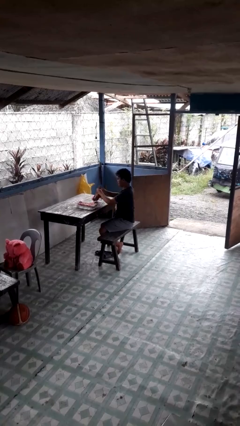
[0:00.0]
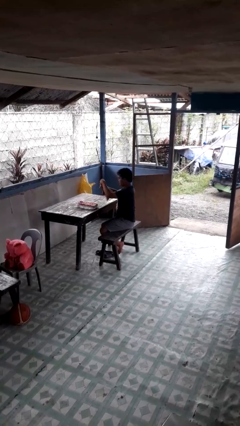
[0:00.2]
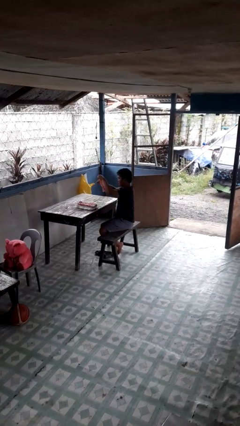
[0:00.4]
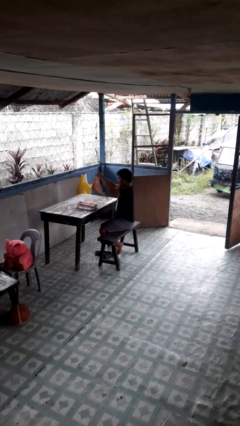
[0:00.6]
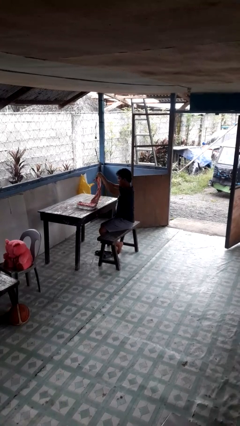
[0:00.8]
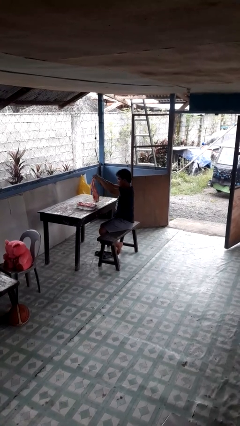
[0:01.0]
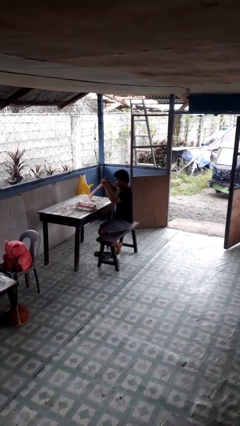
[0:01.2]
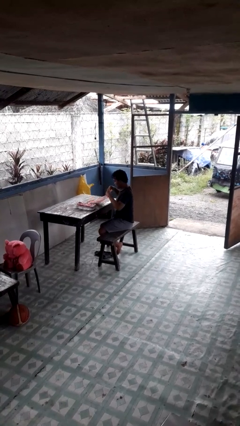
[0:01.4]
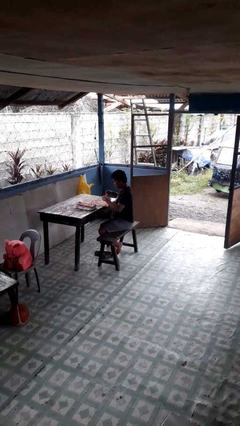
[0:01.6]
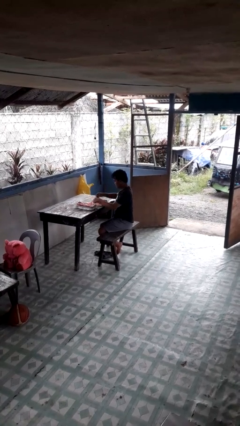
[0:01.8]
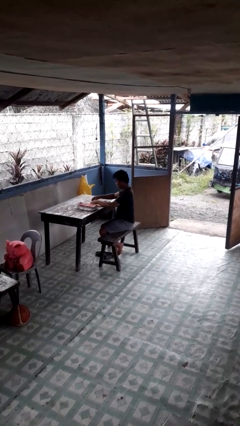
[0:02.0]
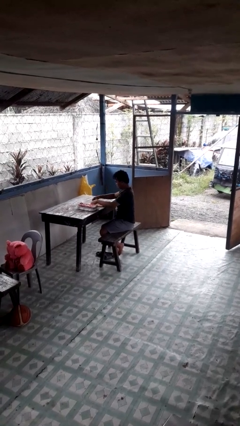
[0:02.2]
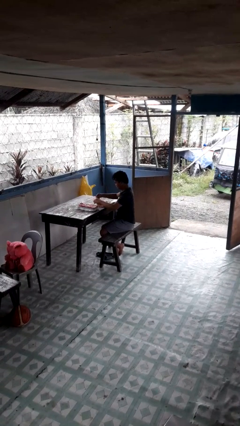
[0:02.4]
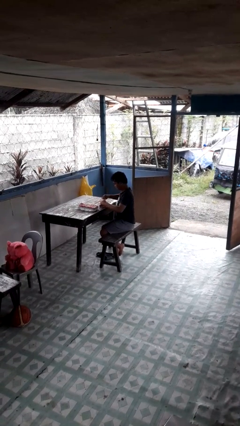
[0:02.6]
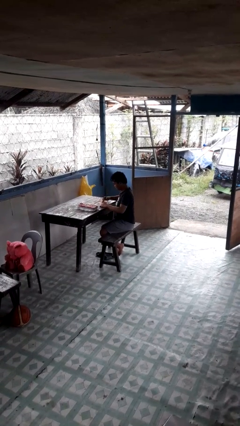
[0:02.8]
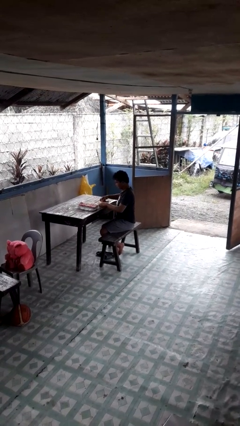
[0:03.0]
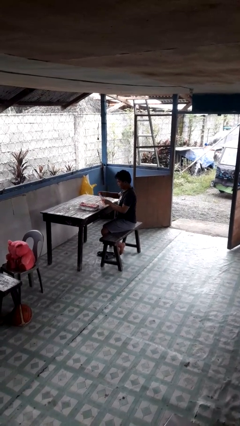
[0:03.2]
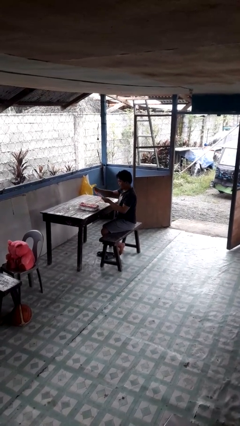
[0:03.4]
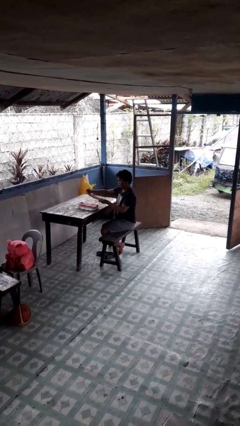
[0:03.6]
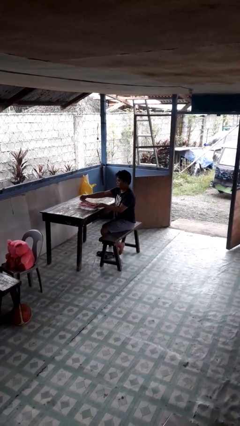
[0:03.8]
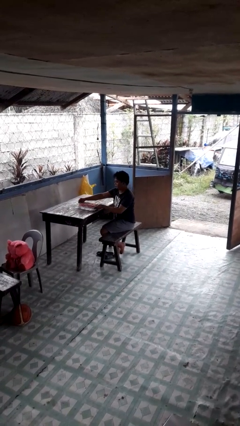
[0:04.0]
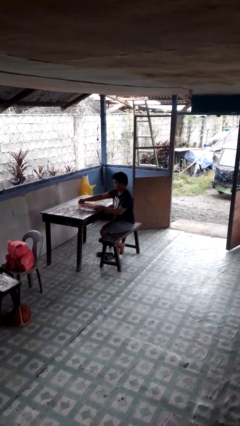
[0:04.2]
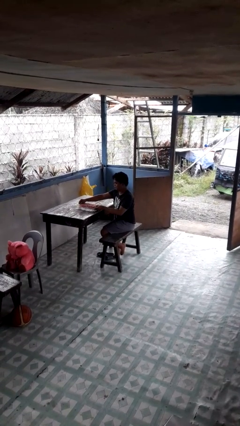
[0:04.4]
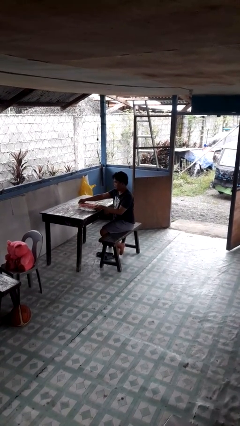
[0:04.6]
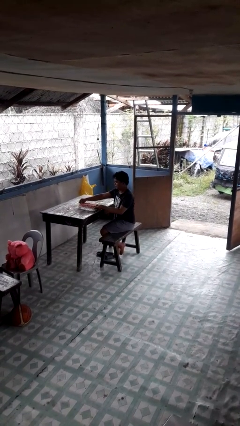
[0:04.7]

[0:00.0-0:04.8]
person folds towel

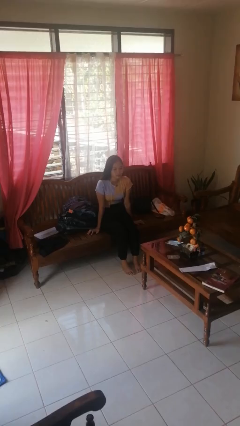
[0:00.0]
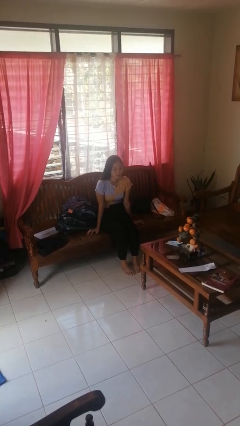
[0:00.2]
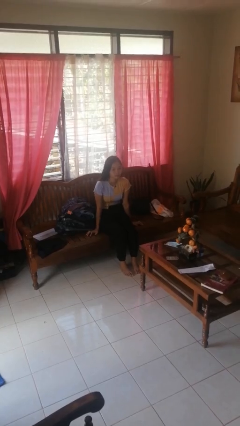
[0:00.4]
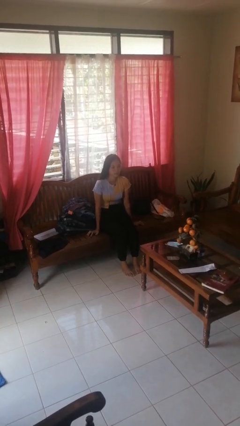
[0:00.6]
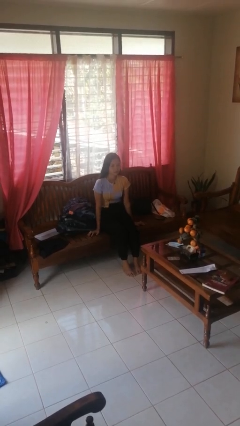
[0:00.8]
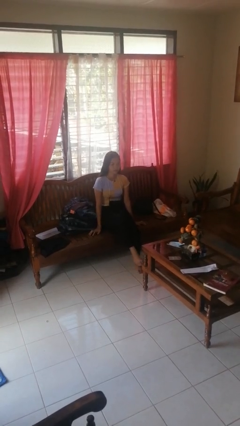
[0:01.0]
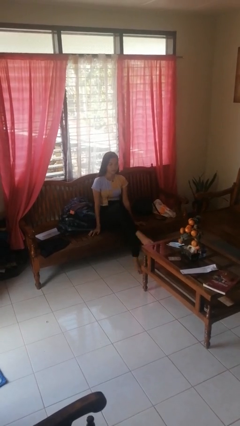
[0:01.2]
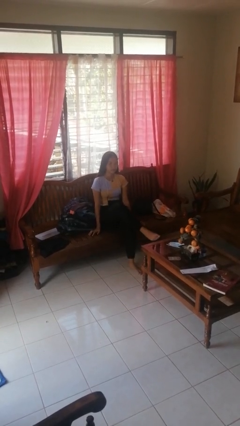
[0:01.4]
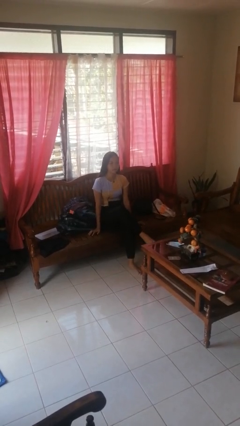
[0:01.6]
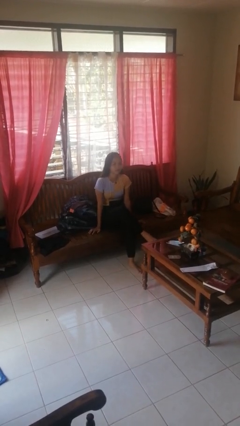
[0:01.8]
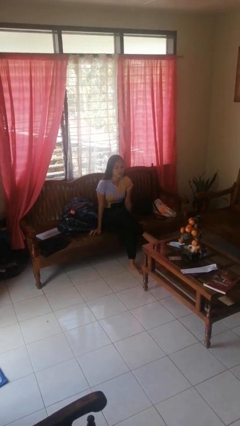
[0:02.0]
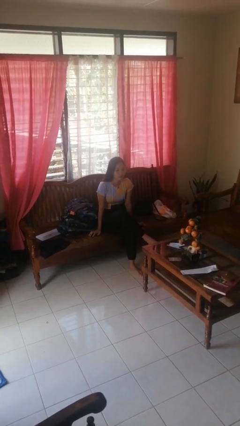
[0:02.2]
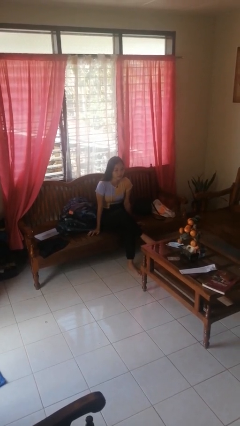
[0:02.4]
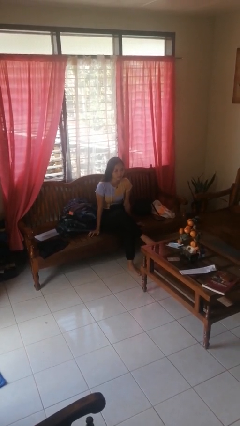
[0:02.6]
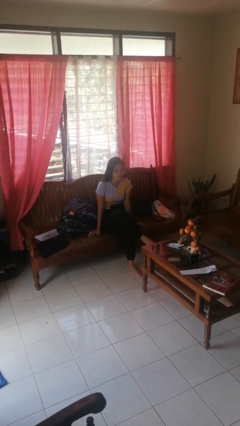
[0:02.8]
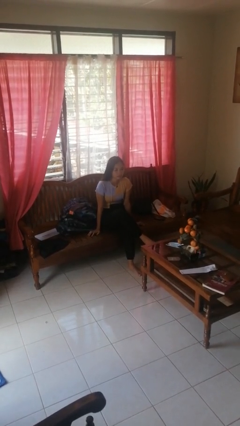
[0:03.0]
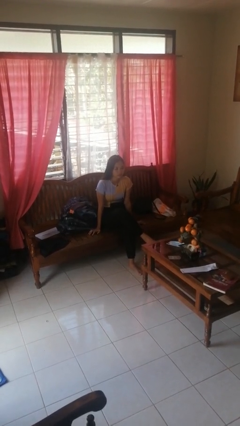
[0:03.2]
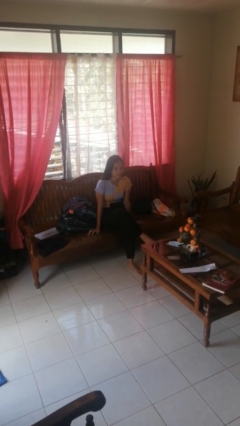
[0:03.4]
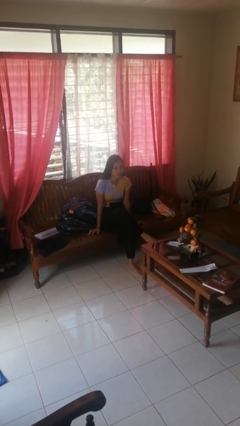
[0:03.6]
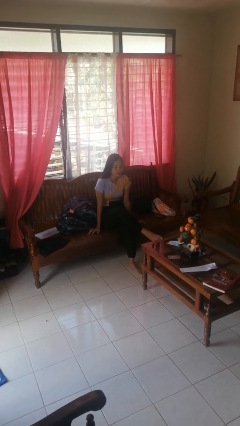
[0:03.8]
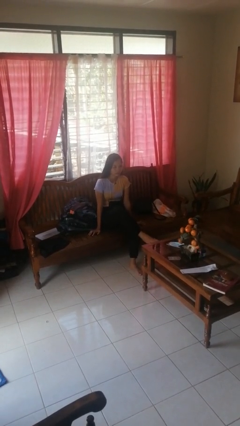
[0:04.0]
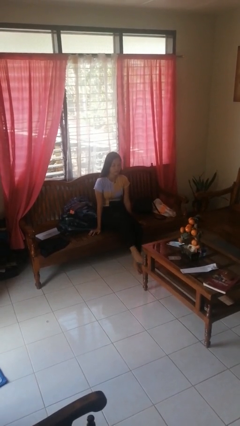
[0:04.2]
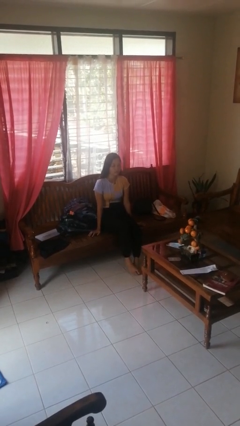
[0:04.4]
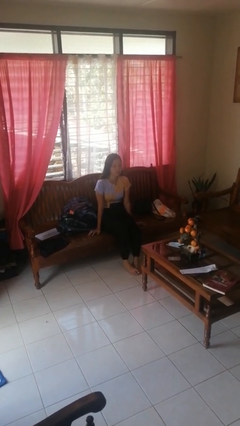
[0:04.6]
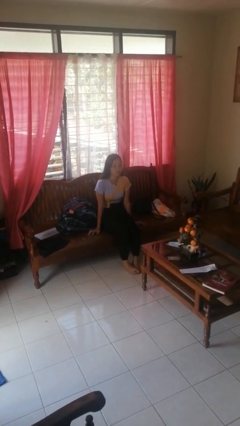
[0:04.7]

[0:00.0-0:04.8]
person crosses legs

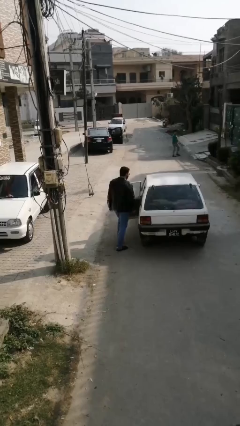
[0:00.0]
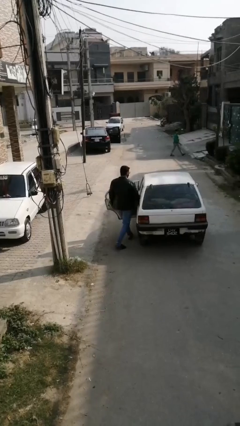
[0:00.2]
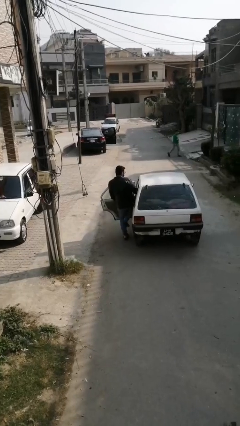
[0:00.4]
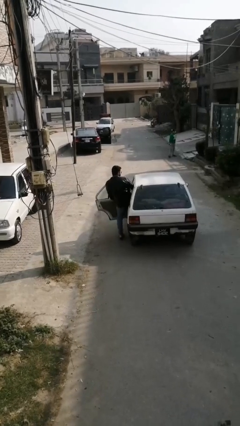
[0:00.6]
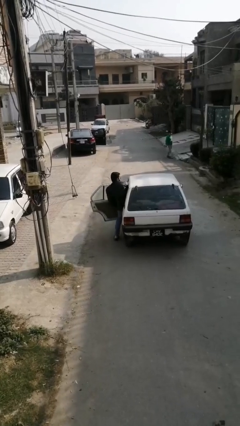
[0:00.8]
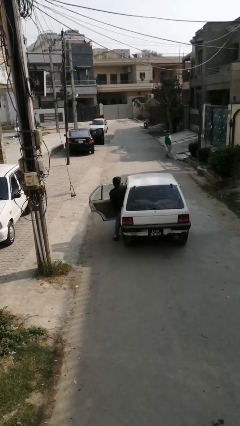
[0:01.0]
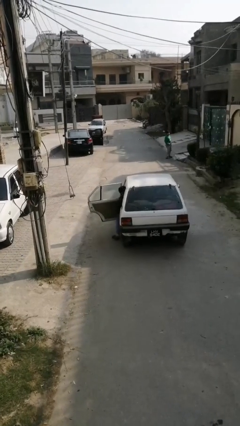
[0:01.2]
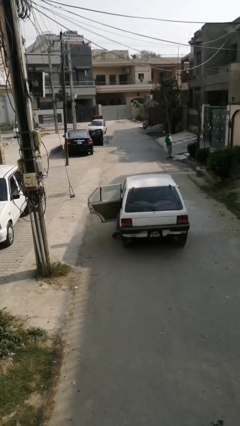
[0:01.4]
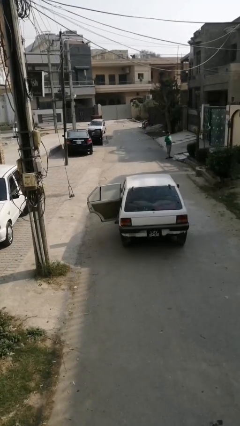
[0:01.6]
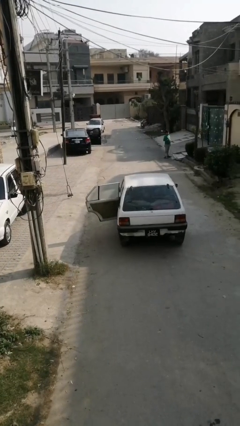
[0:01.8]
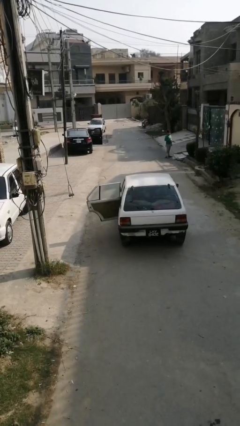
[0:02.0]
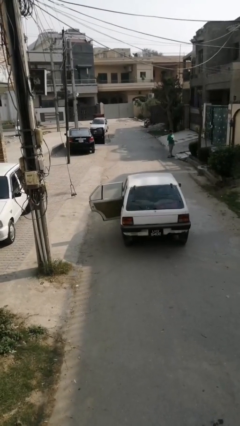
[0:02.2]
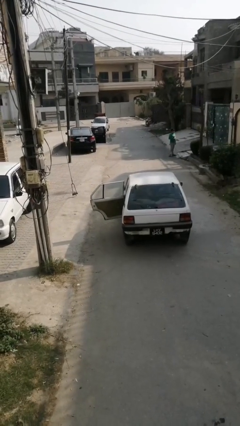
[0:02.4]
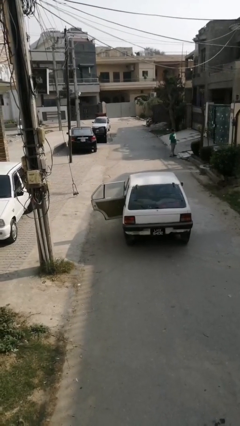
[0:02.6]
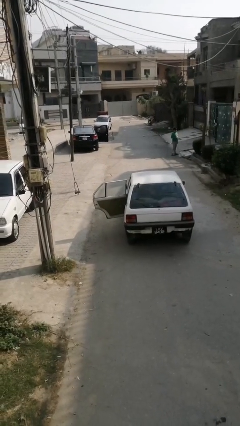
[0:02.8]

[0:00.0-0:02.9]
person enters car

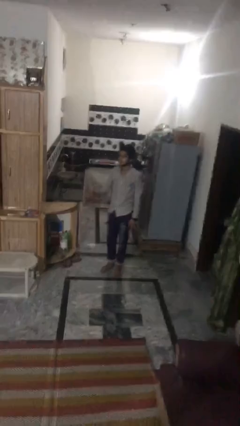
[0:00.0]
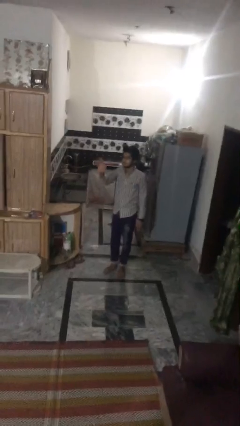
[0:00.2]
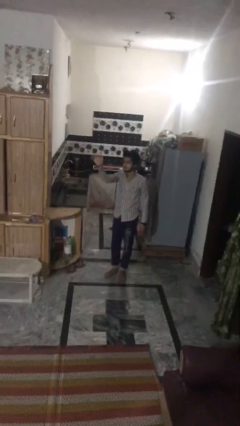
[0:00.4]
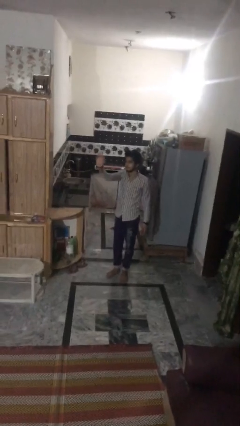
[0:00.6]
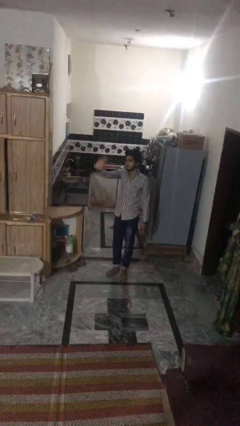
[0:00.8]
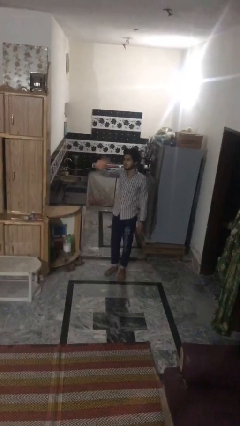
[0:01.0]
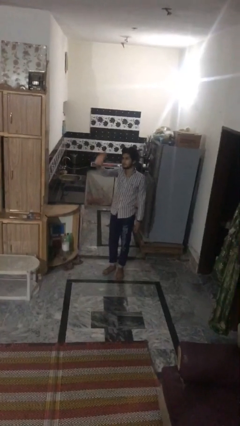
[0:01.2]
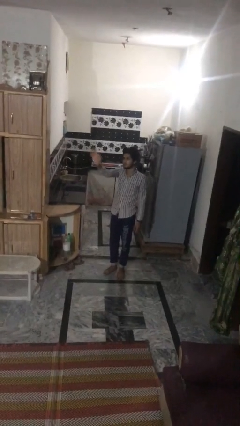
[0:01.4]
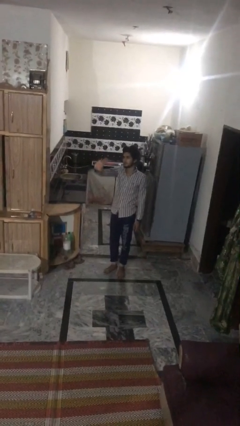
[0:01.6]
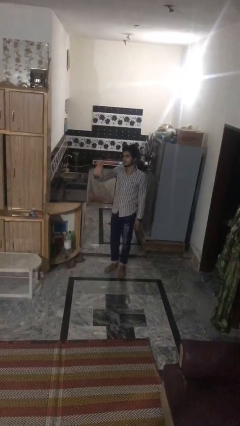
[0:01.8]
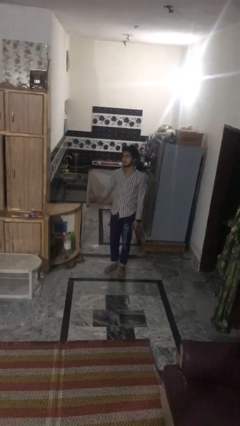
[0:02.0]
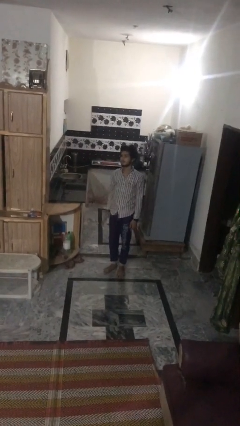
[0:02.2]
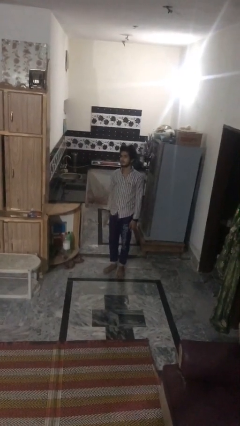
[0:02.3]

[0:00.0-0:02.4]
person waves at person

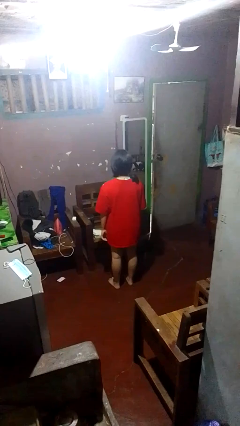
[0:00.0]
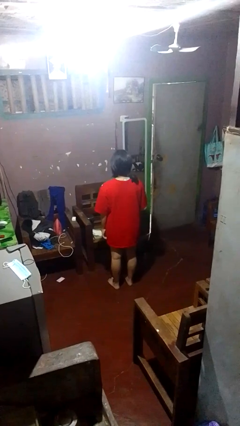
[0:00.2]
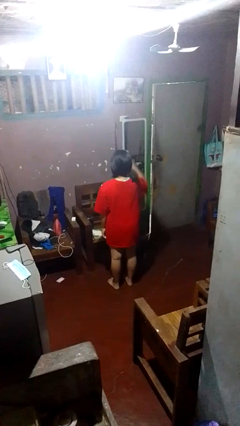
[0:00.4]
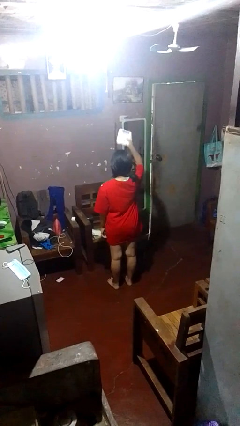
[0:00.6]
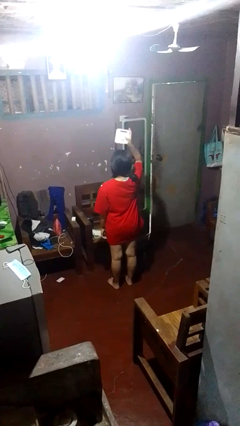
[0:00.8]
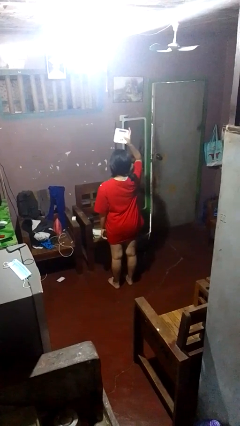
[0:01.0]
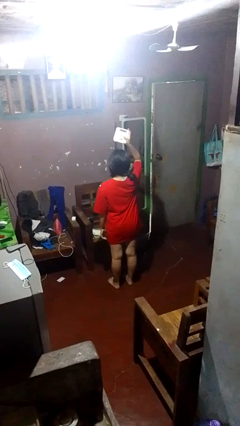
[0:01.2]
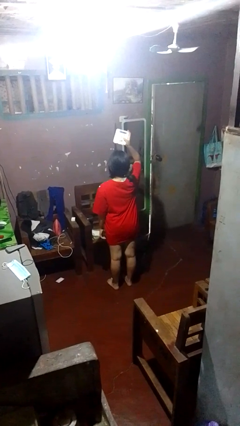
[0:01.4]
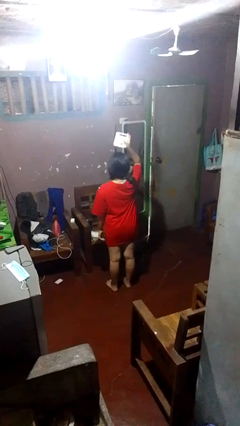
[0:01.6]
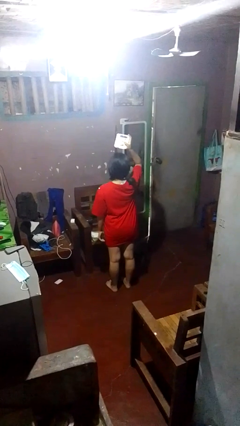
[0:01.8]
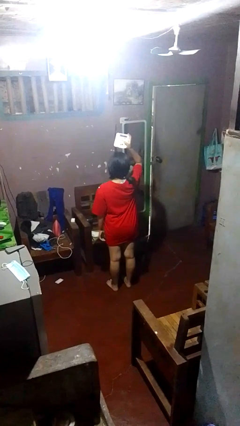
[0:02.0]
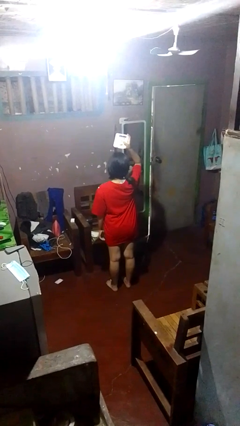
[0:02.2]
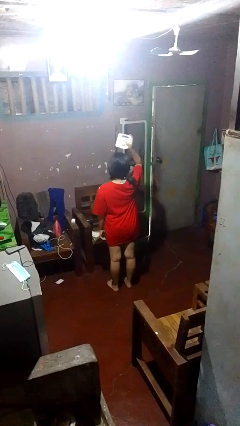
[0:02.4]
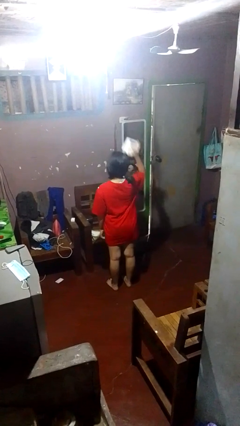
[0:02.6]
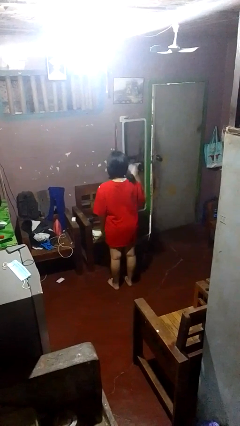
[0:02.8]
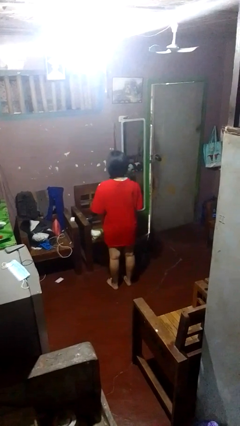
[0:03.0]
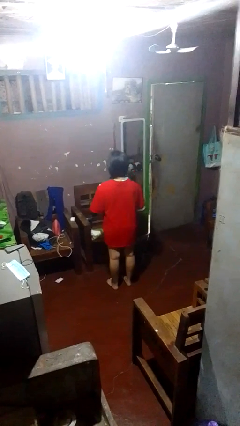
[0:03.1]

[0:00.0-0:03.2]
person holds object above head
